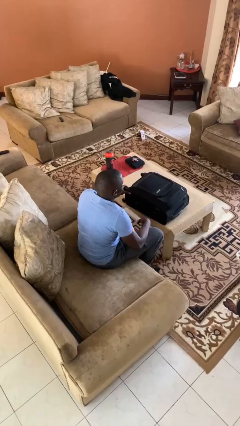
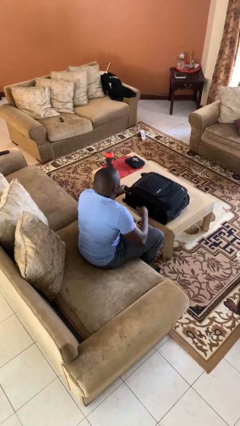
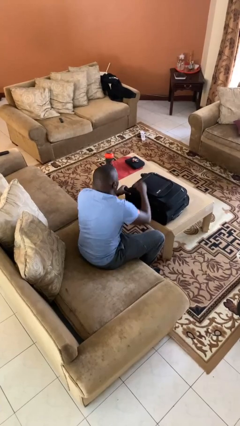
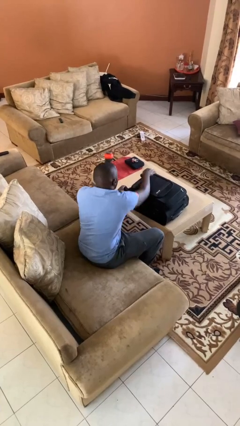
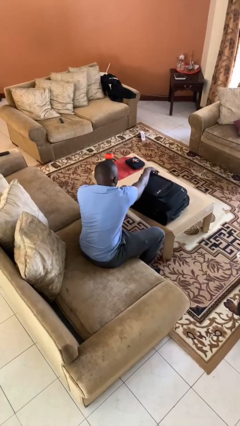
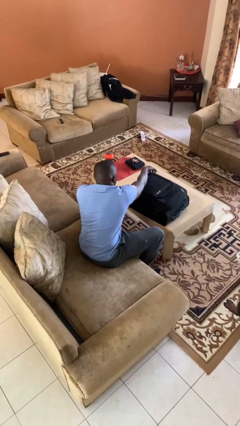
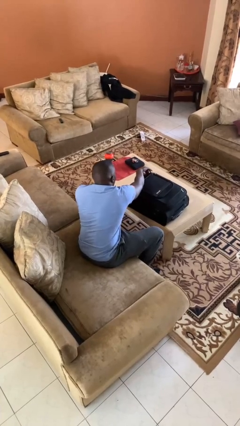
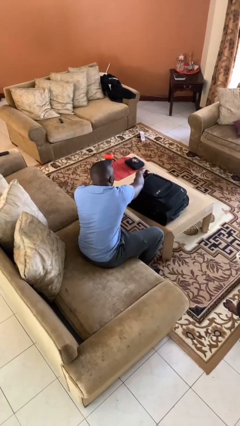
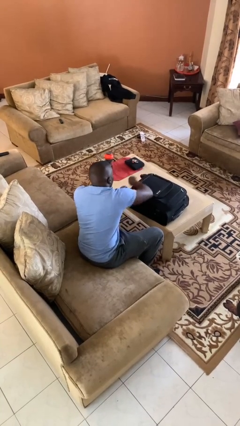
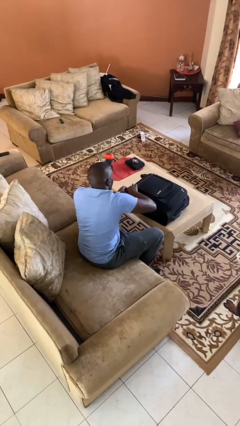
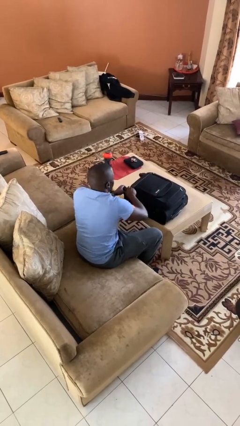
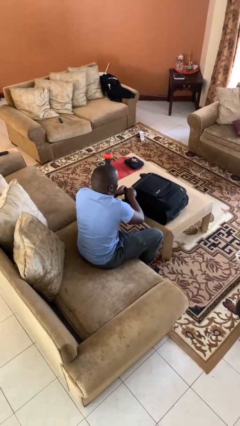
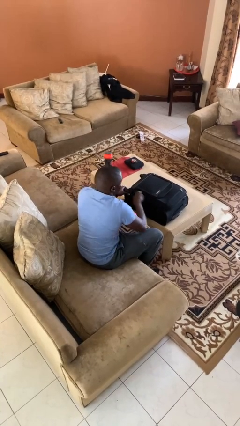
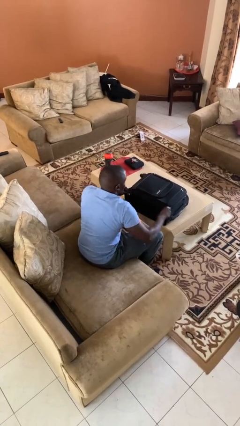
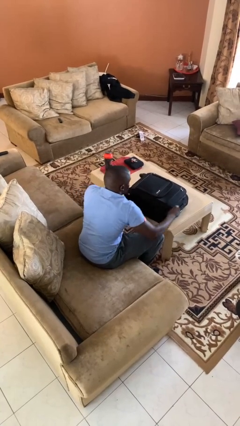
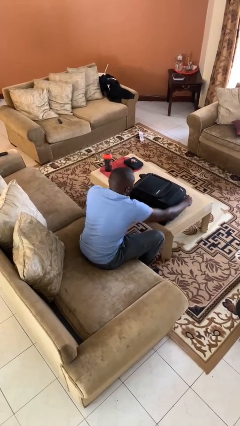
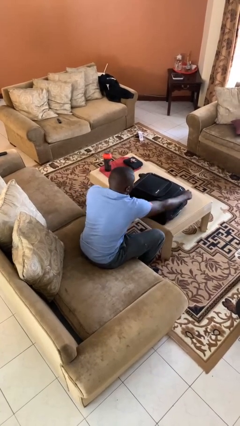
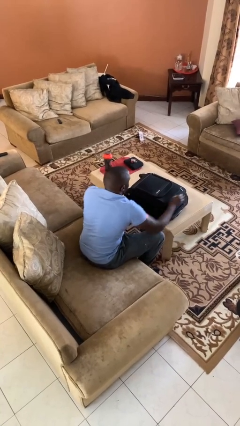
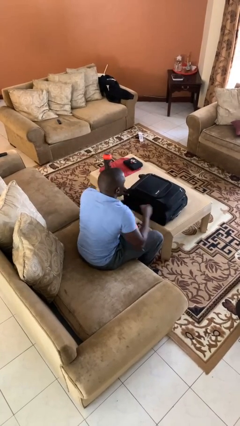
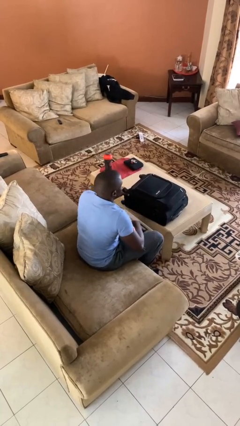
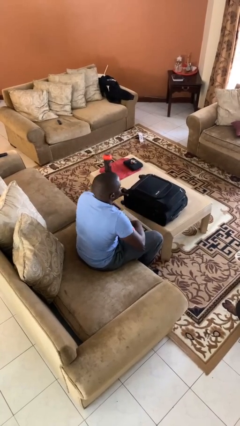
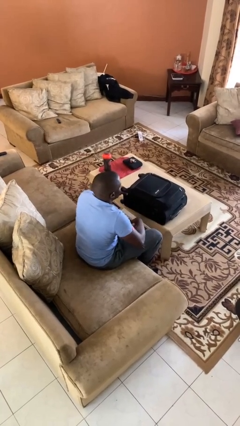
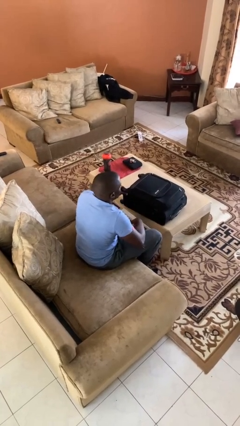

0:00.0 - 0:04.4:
person closes suitcase

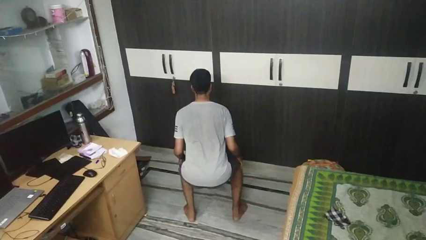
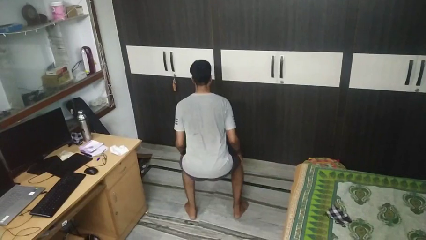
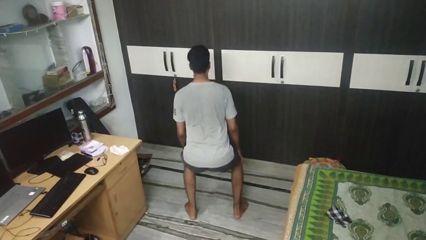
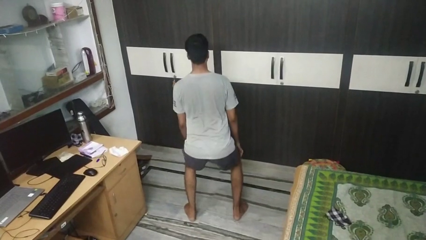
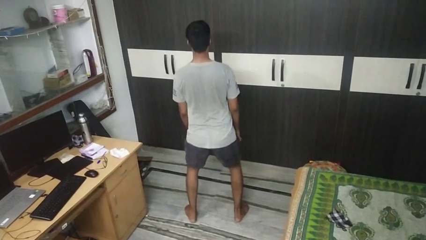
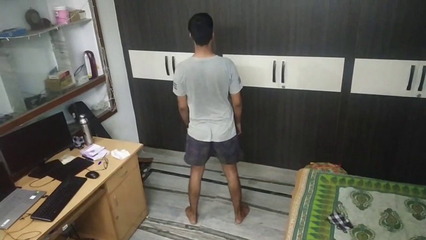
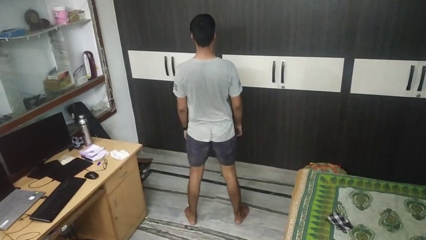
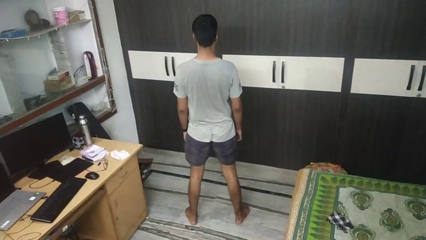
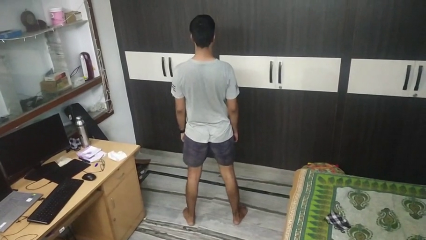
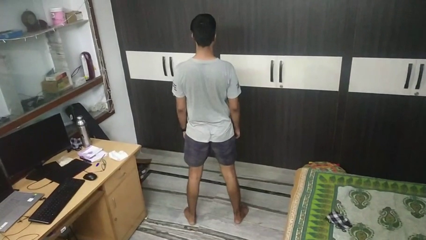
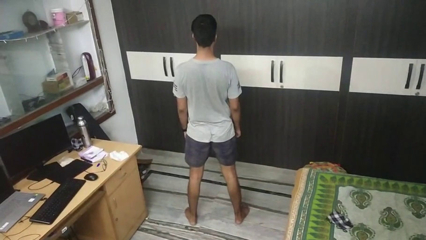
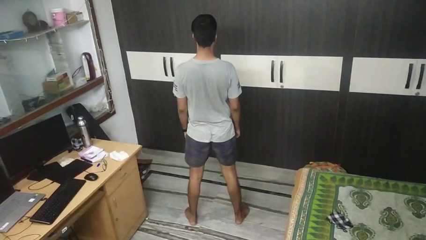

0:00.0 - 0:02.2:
person stands up

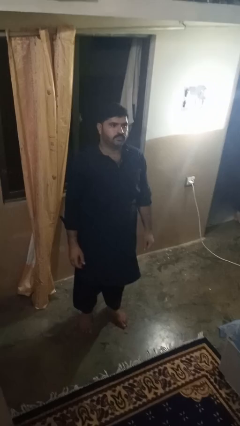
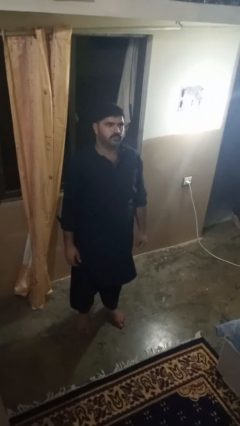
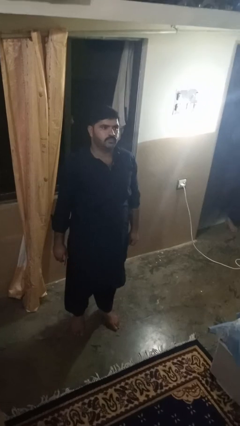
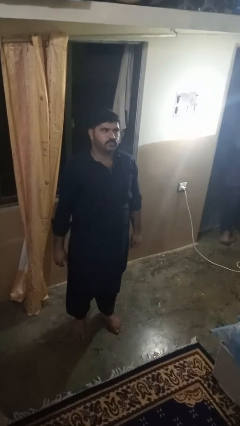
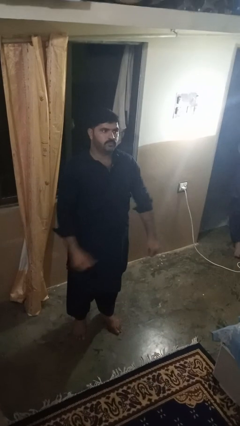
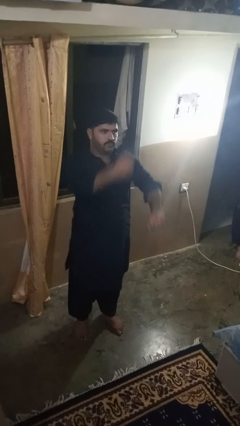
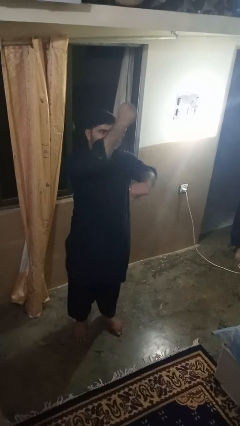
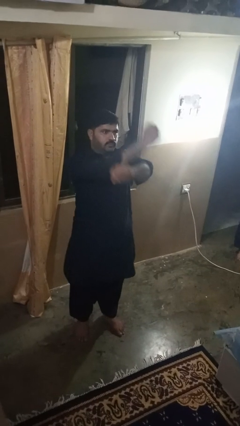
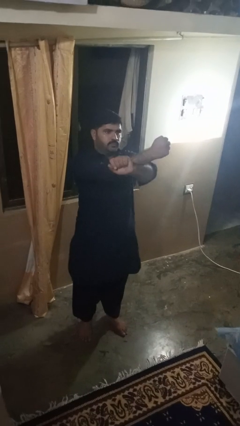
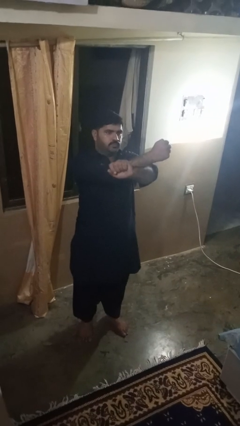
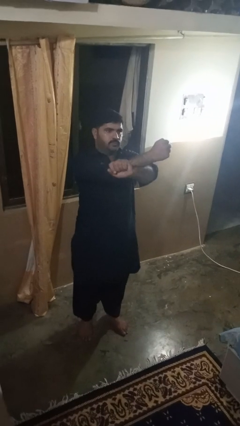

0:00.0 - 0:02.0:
person crosses arms

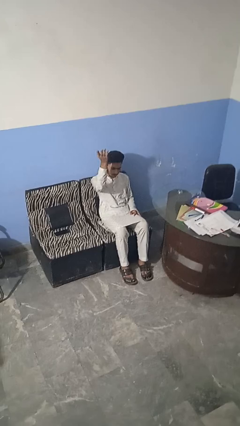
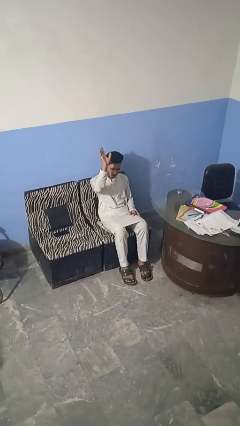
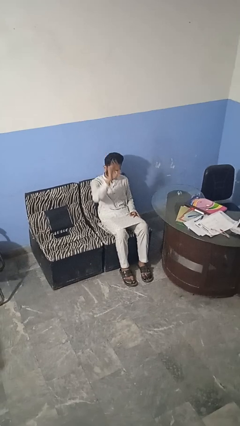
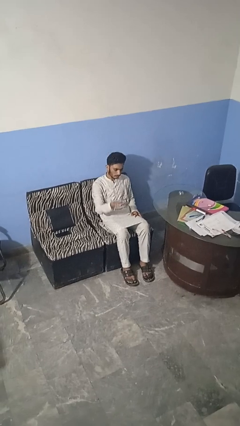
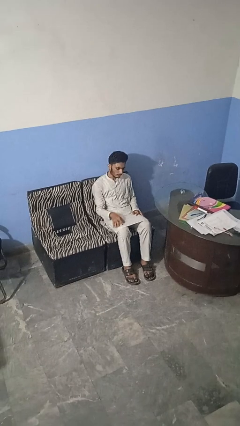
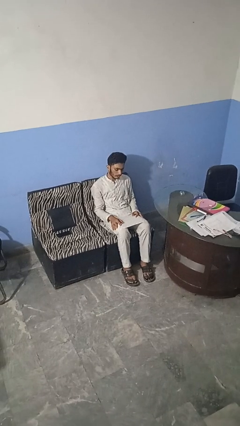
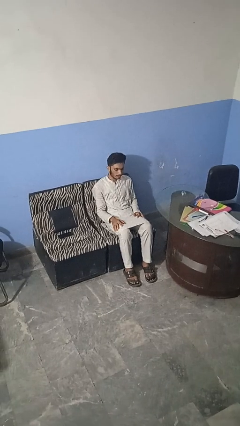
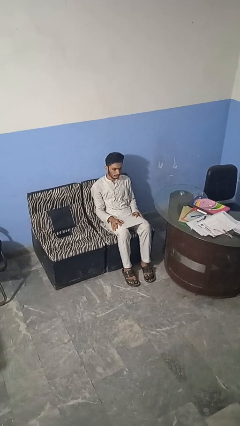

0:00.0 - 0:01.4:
person gestures swipe down

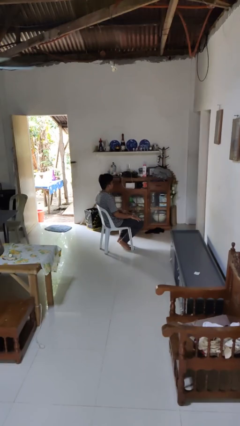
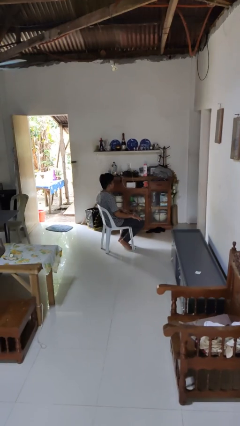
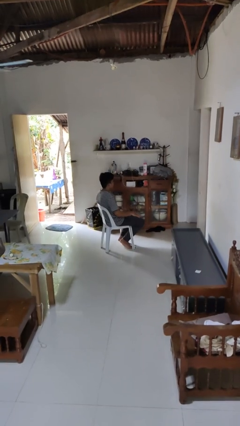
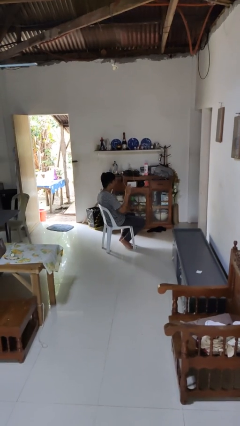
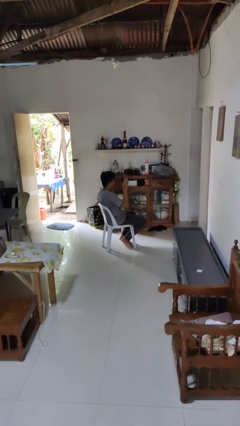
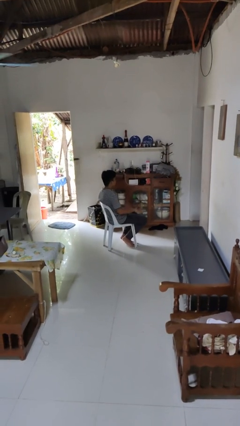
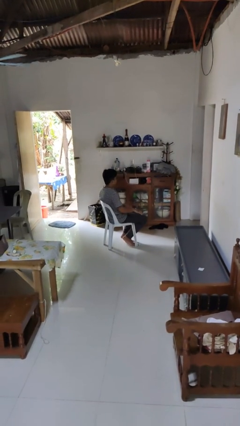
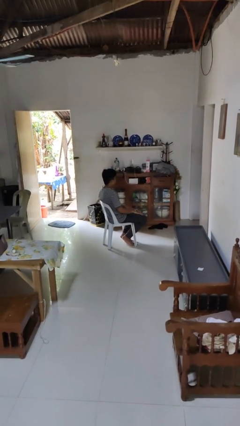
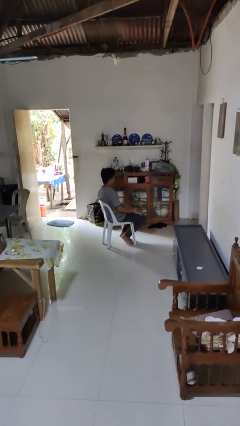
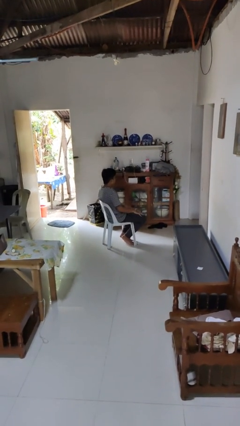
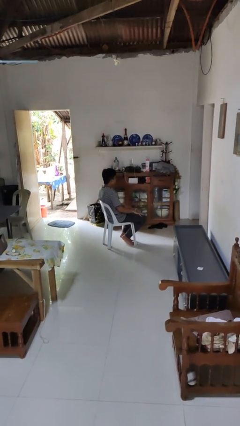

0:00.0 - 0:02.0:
person slaps hands on thighs

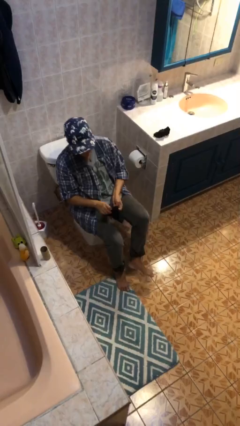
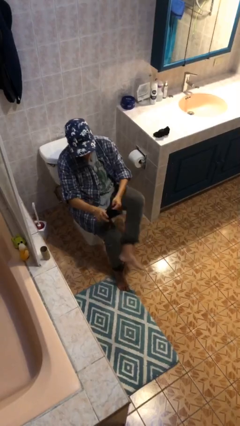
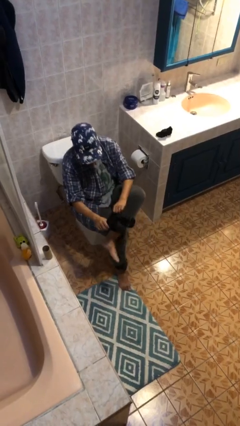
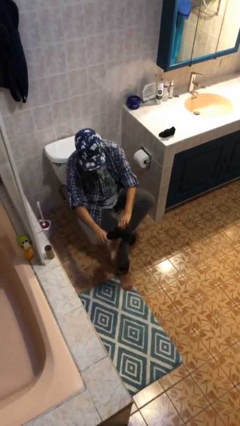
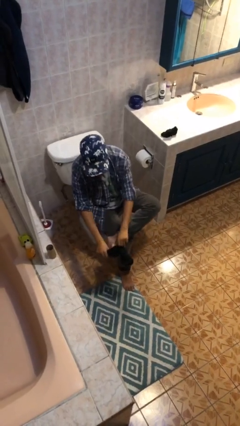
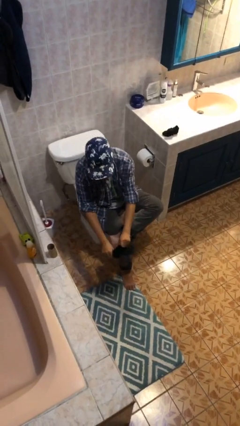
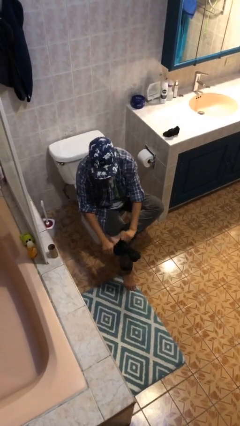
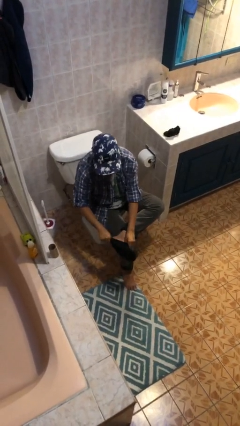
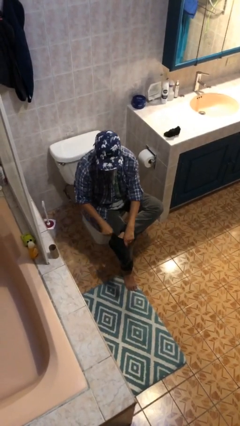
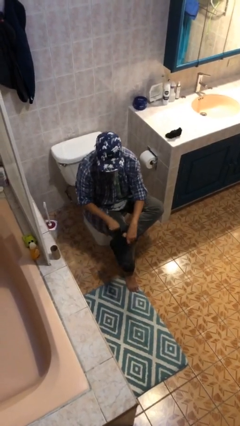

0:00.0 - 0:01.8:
person puts on socks

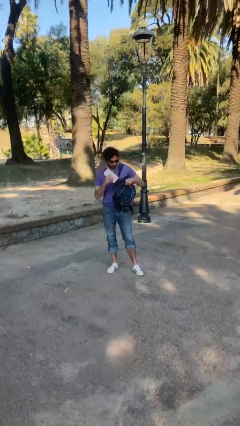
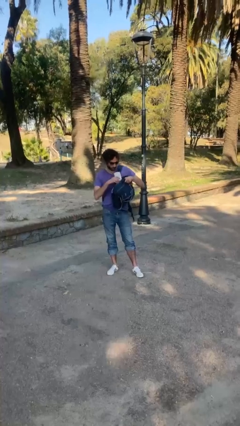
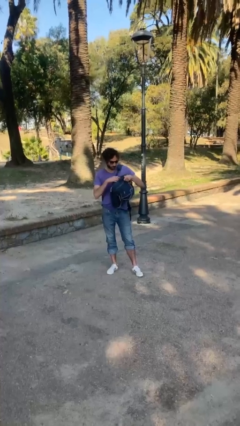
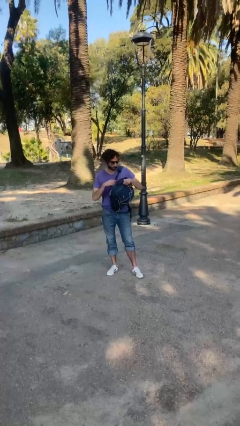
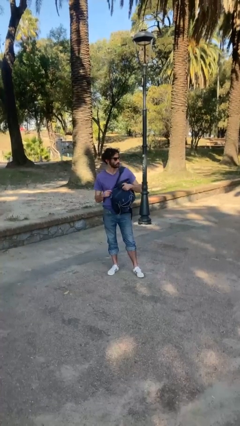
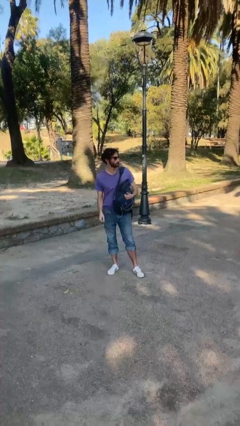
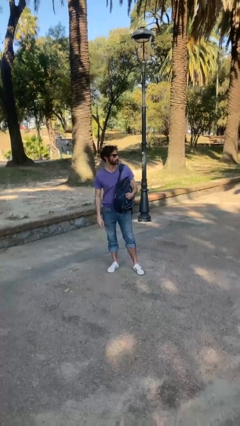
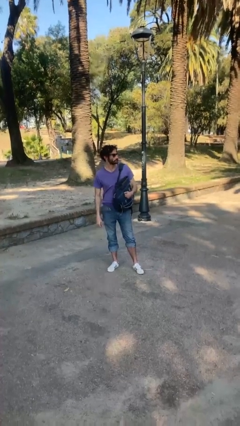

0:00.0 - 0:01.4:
person puts object into backpack

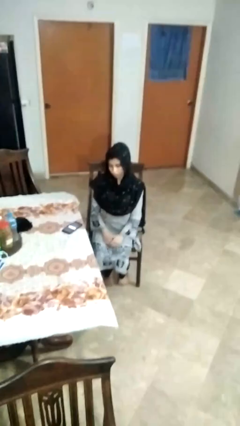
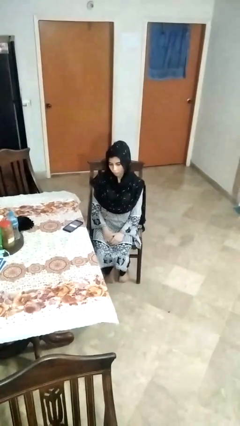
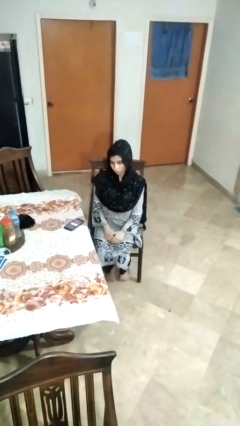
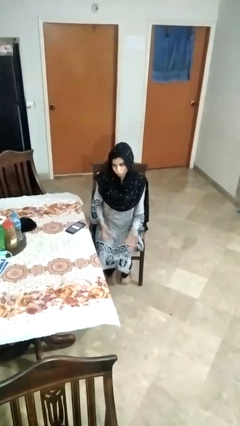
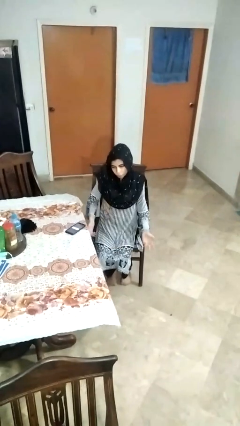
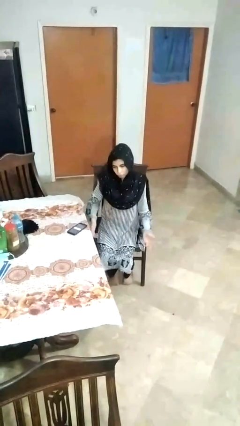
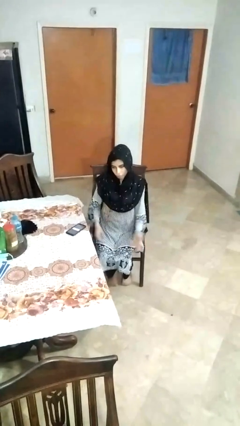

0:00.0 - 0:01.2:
person shrugs

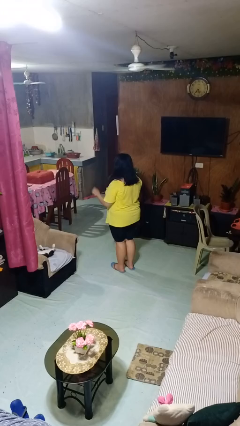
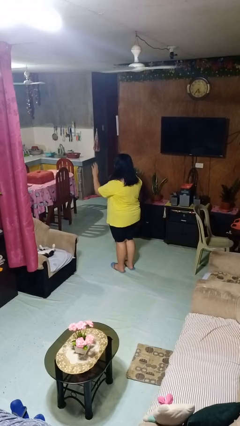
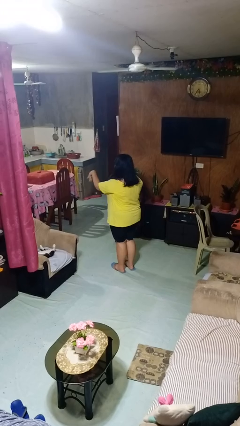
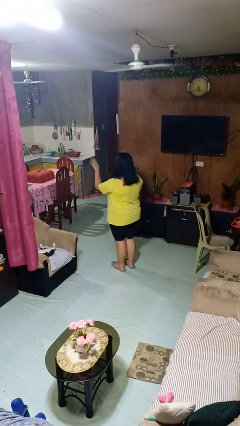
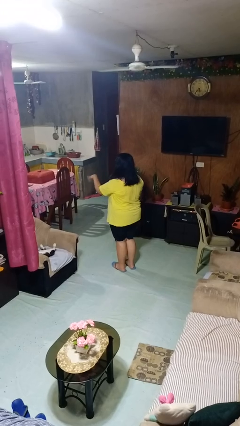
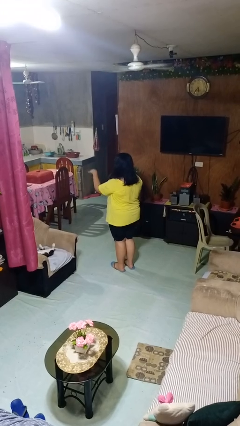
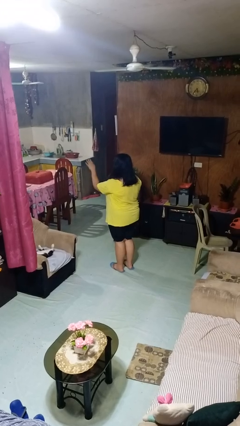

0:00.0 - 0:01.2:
person gestures come here
